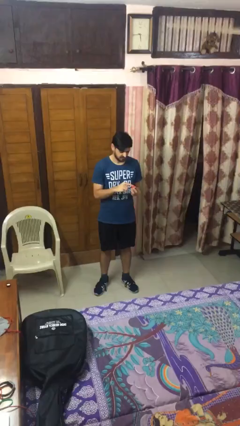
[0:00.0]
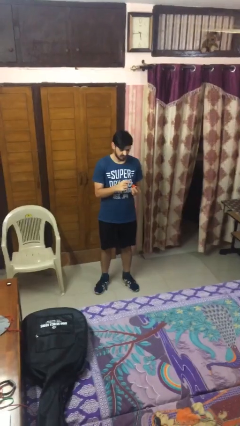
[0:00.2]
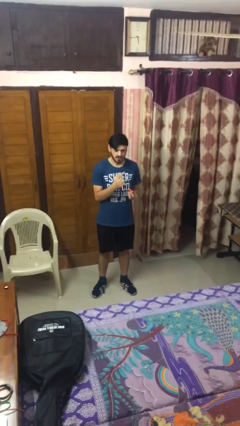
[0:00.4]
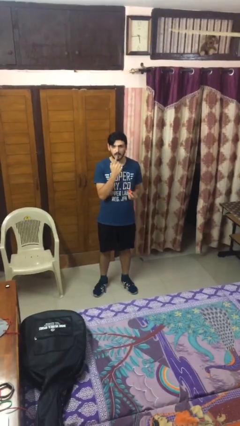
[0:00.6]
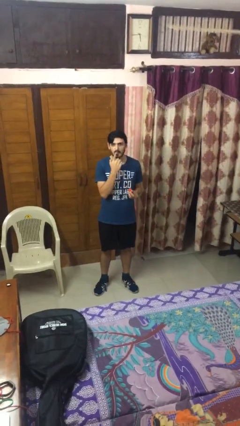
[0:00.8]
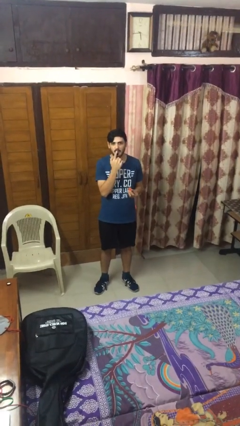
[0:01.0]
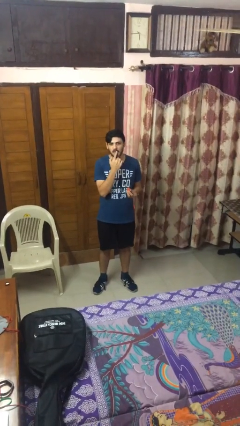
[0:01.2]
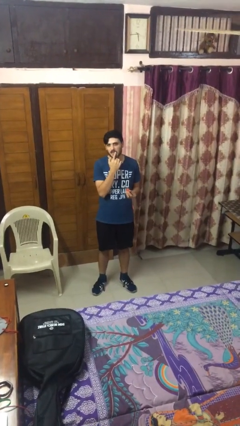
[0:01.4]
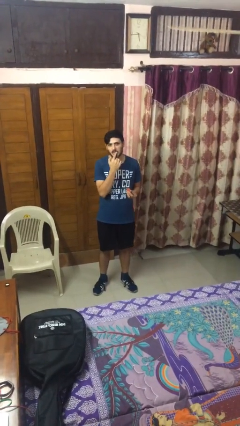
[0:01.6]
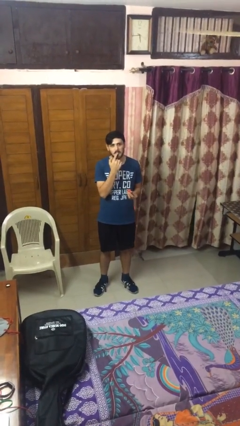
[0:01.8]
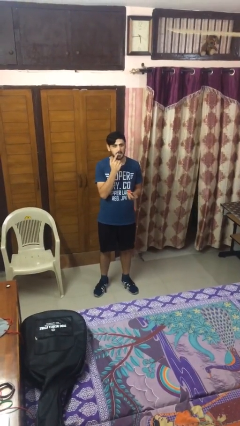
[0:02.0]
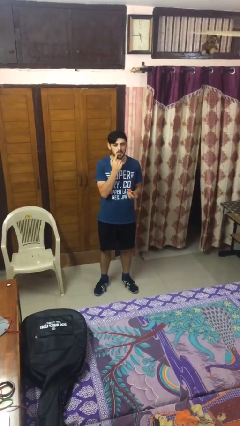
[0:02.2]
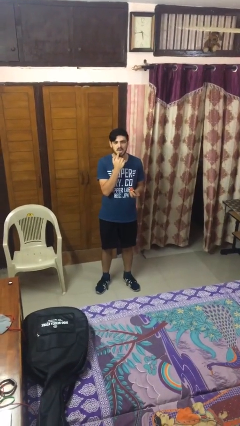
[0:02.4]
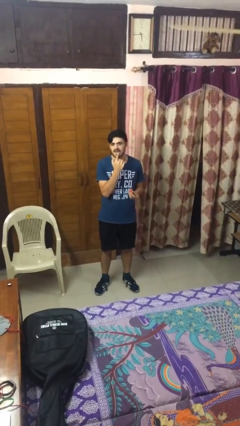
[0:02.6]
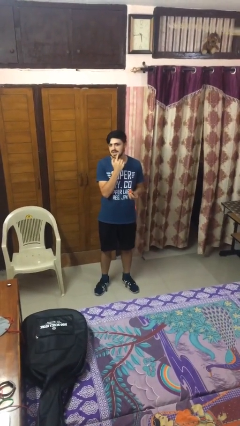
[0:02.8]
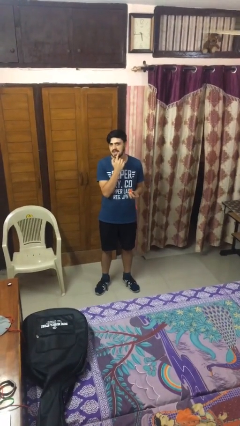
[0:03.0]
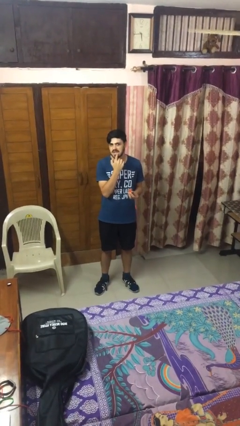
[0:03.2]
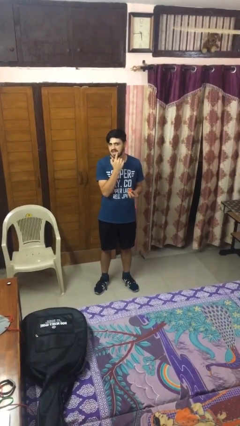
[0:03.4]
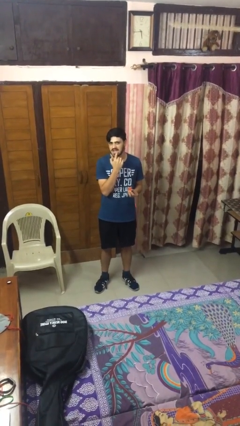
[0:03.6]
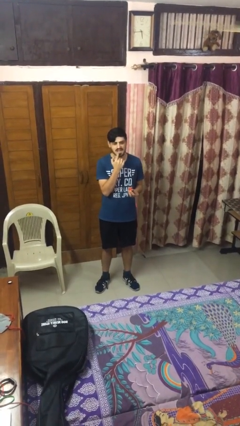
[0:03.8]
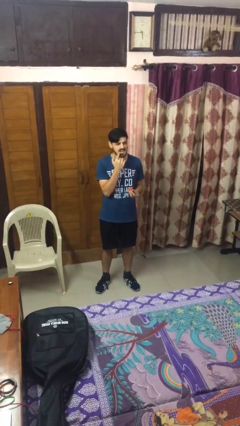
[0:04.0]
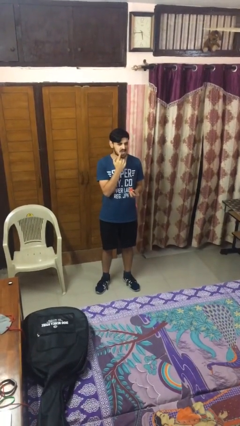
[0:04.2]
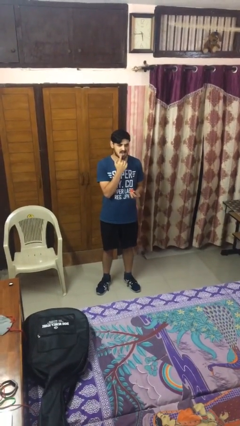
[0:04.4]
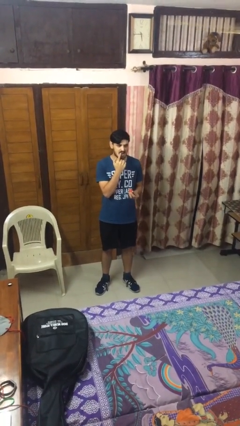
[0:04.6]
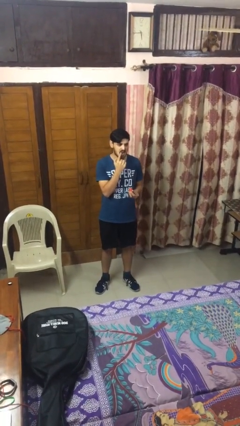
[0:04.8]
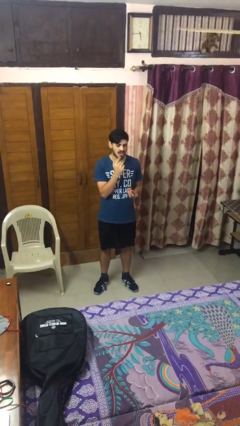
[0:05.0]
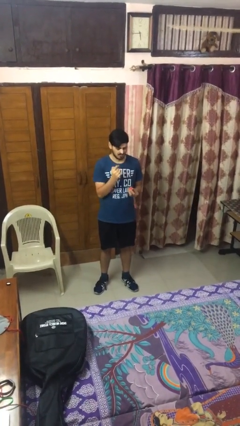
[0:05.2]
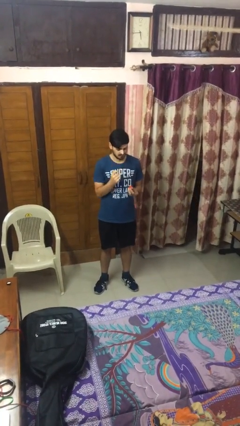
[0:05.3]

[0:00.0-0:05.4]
person applies lip makeup

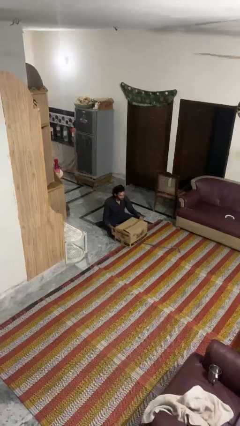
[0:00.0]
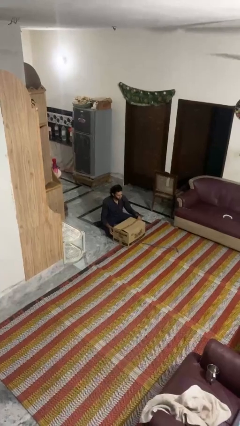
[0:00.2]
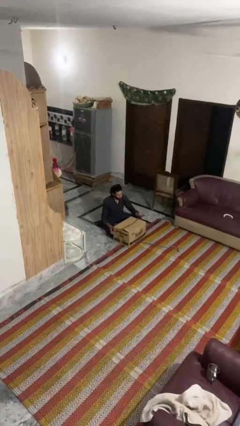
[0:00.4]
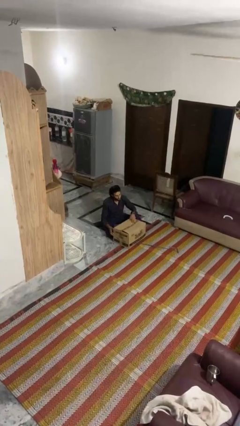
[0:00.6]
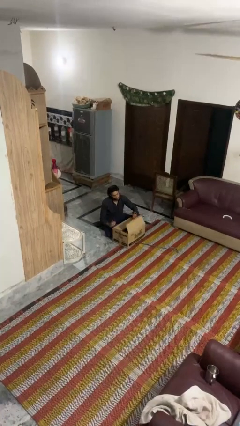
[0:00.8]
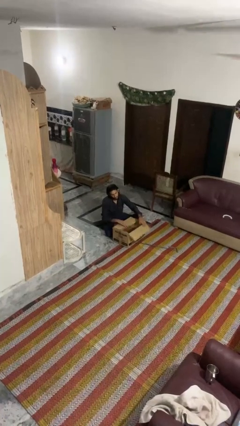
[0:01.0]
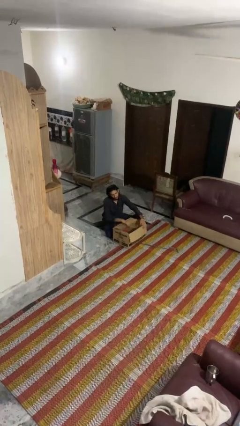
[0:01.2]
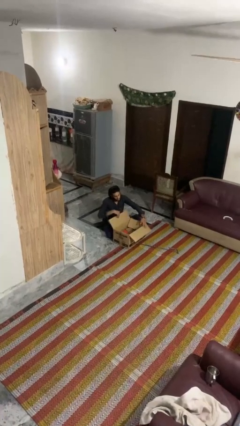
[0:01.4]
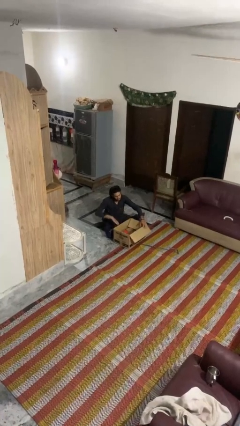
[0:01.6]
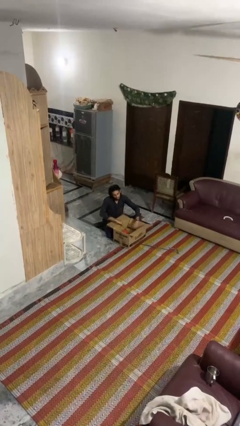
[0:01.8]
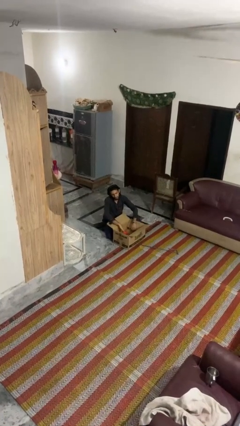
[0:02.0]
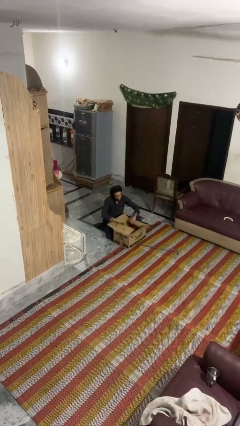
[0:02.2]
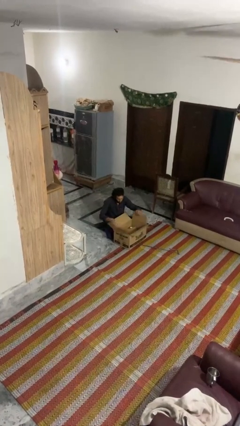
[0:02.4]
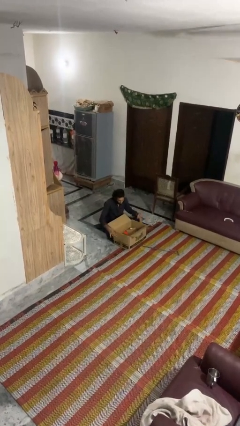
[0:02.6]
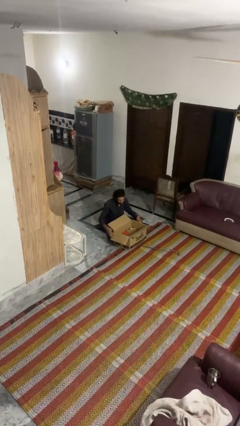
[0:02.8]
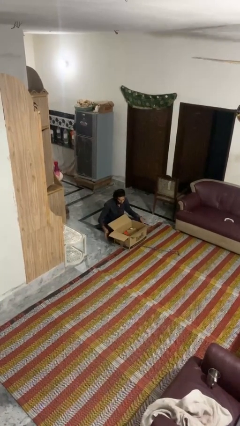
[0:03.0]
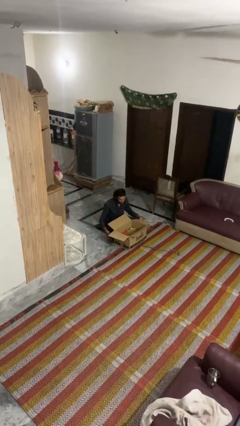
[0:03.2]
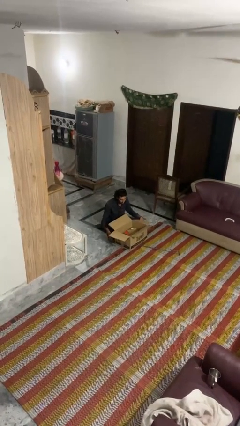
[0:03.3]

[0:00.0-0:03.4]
person opens box

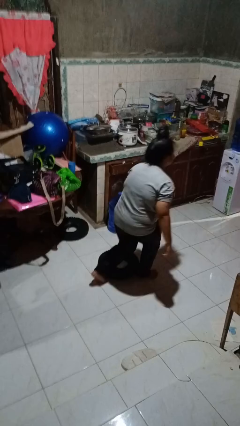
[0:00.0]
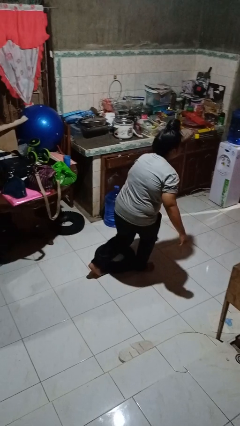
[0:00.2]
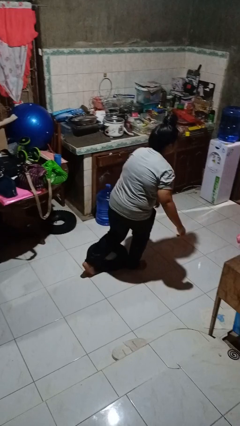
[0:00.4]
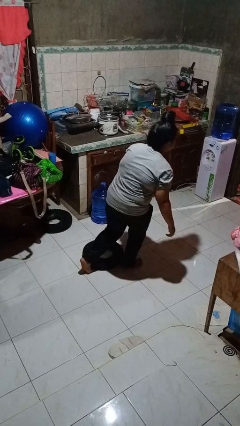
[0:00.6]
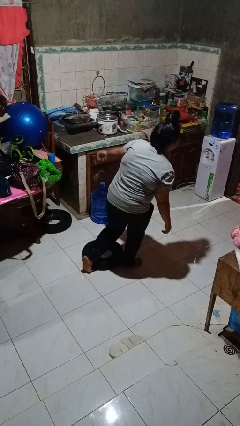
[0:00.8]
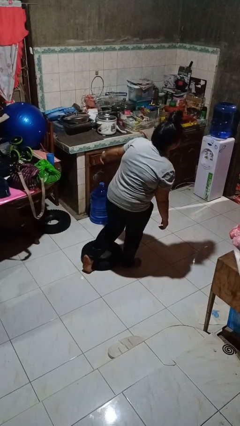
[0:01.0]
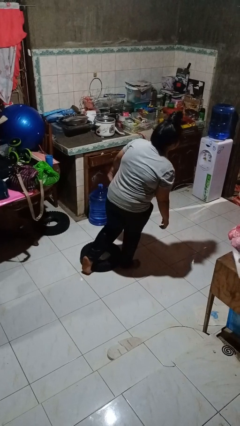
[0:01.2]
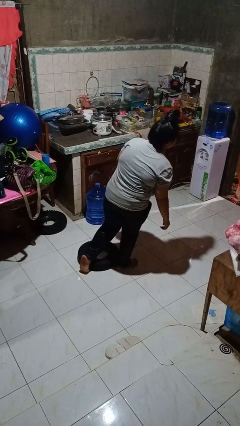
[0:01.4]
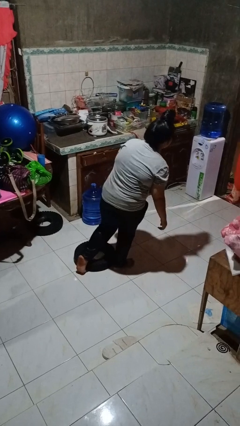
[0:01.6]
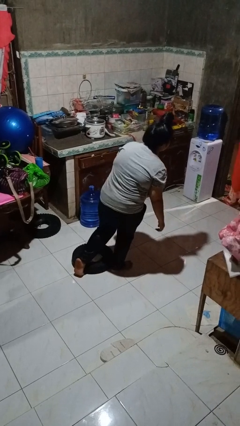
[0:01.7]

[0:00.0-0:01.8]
person trips on object on floor

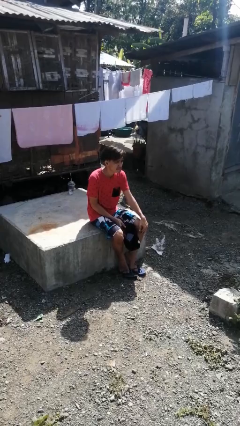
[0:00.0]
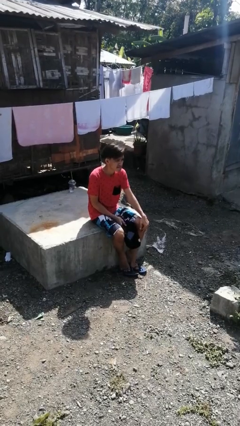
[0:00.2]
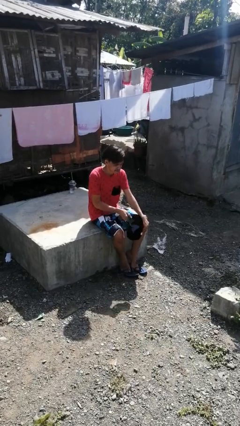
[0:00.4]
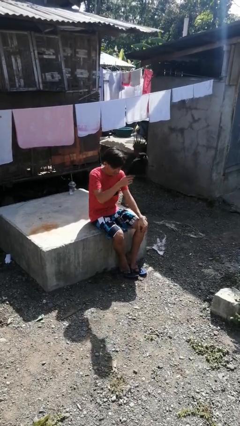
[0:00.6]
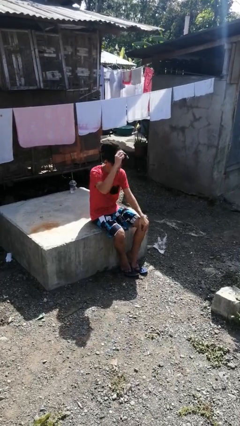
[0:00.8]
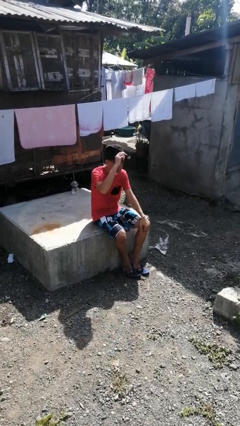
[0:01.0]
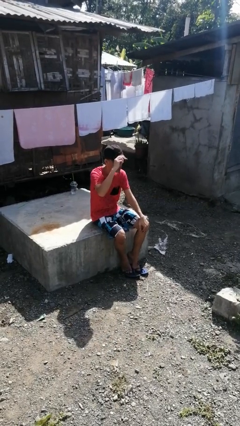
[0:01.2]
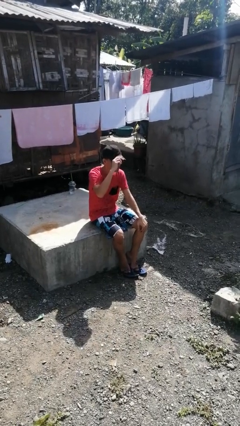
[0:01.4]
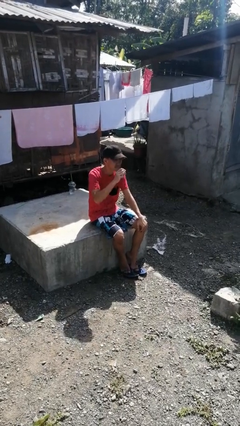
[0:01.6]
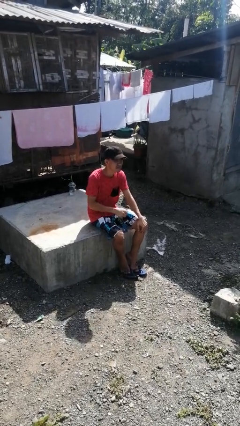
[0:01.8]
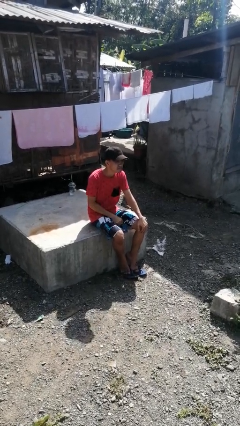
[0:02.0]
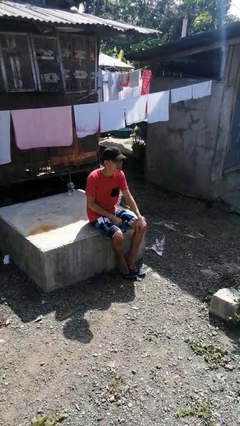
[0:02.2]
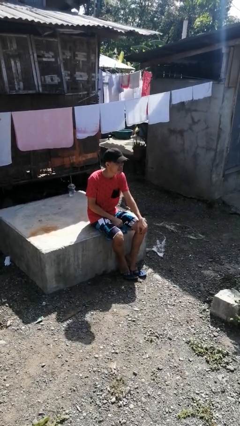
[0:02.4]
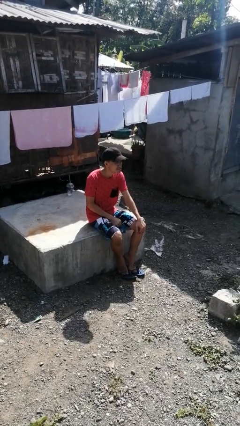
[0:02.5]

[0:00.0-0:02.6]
person puts on hat

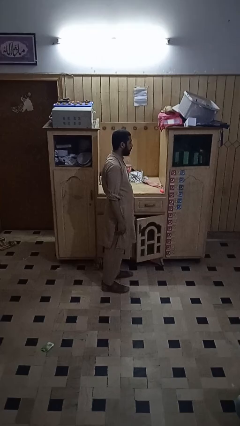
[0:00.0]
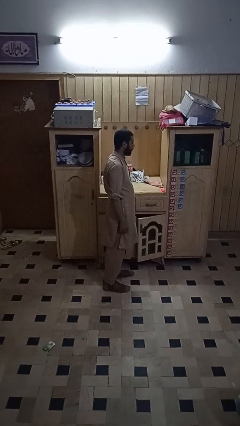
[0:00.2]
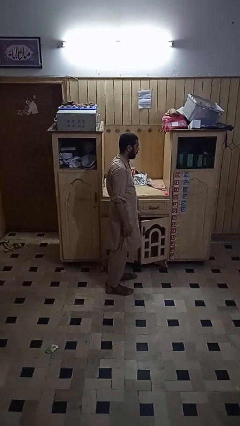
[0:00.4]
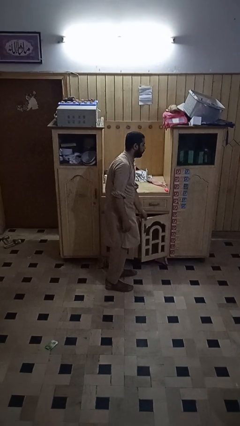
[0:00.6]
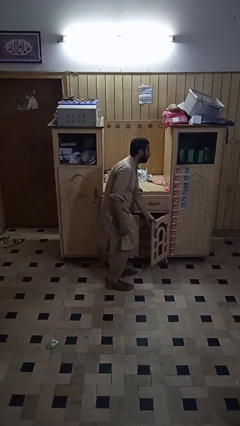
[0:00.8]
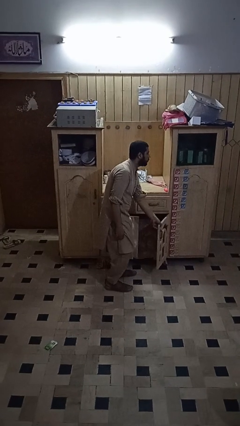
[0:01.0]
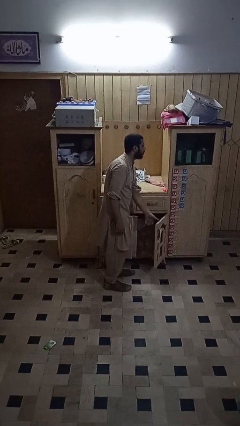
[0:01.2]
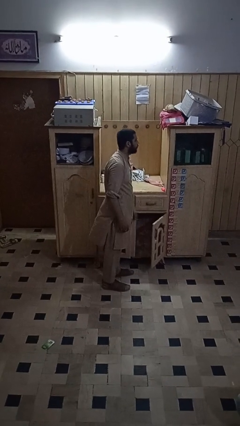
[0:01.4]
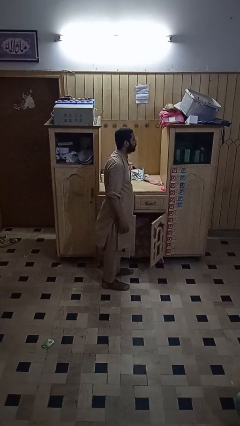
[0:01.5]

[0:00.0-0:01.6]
person closes cabinet

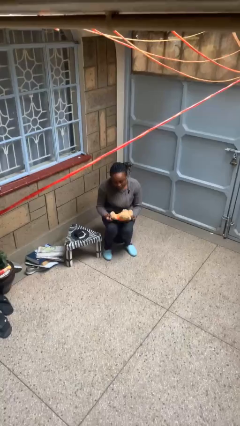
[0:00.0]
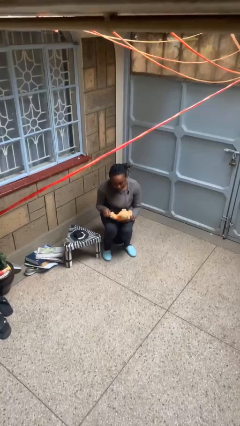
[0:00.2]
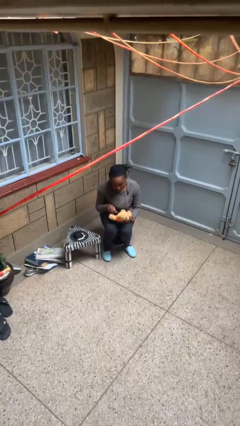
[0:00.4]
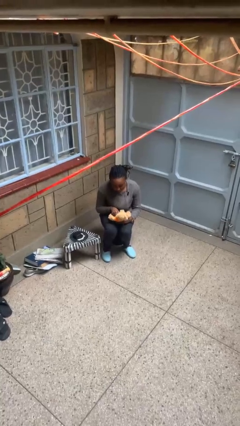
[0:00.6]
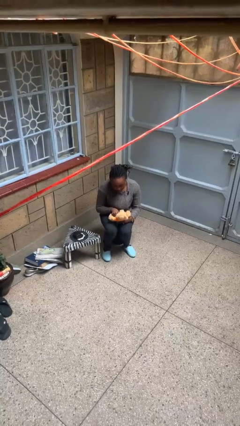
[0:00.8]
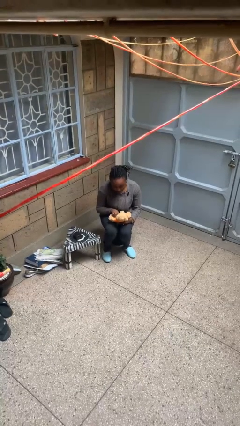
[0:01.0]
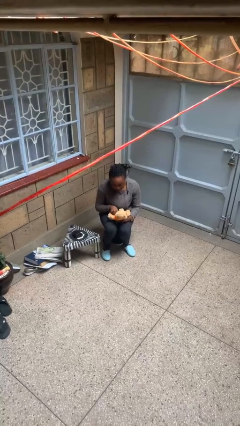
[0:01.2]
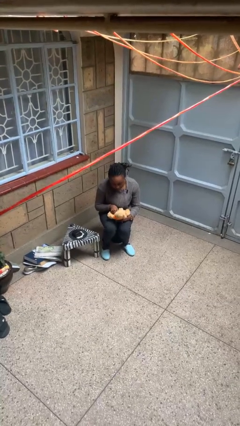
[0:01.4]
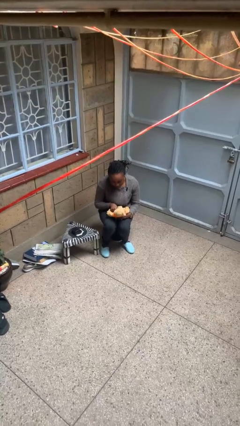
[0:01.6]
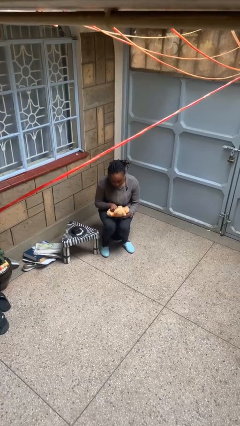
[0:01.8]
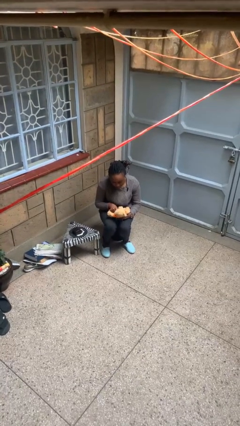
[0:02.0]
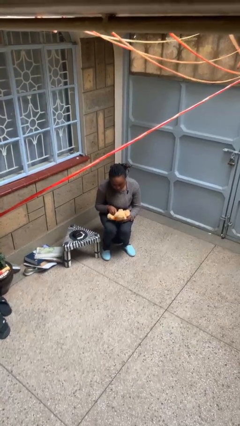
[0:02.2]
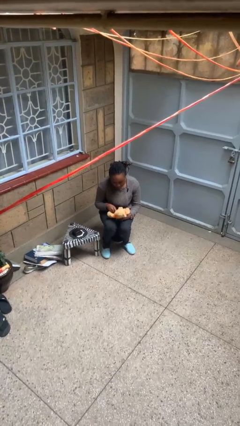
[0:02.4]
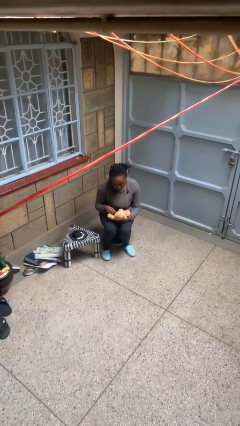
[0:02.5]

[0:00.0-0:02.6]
person squeezes object
